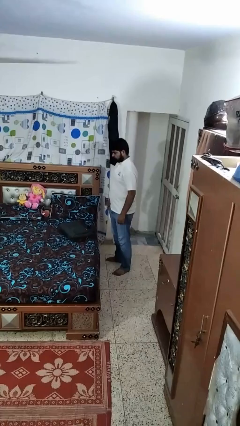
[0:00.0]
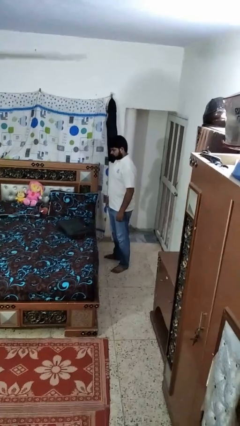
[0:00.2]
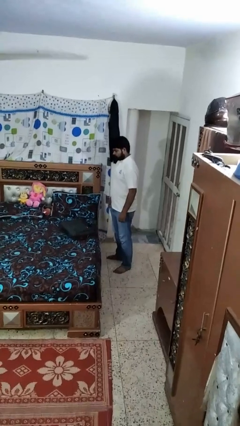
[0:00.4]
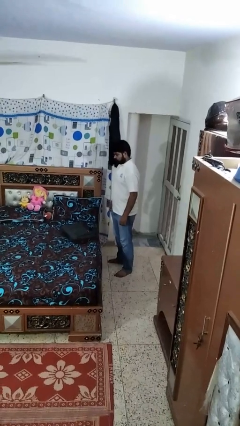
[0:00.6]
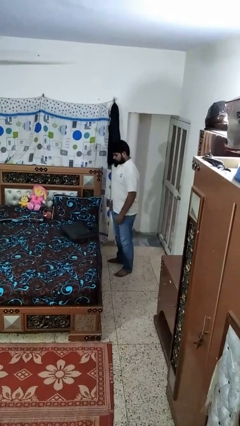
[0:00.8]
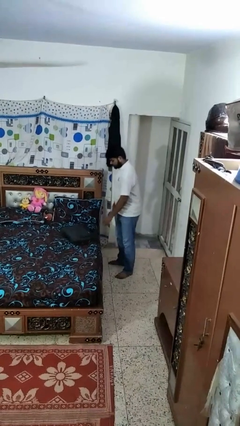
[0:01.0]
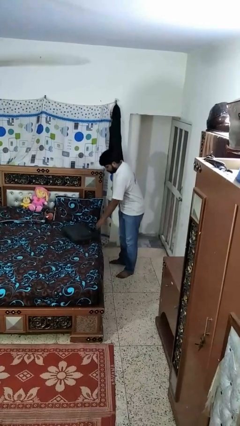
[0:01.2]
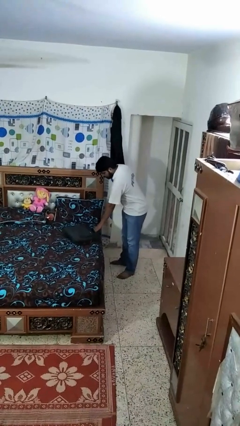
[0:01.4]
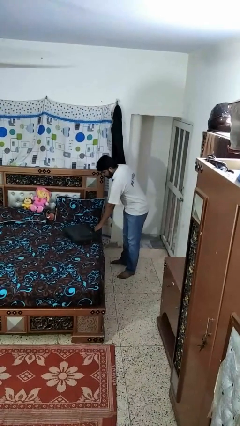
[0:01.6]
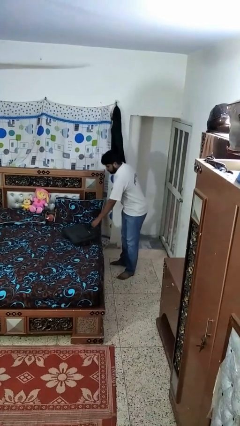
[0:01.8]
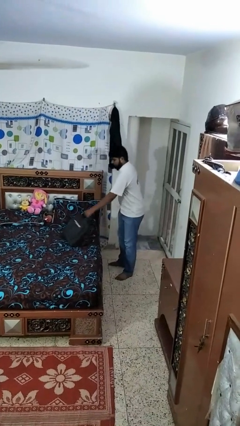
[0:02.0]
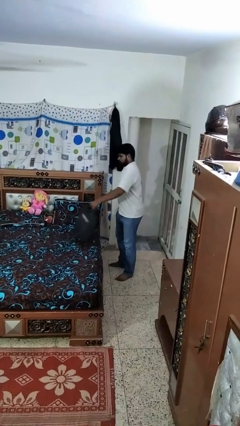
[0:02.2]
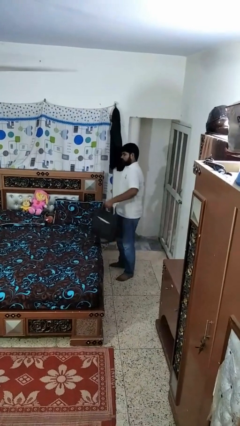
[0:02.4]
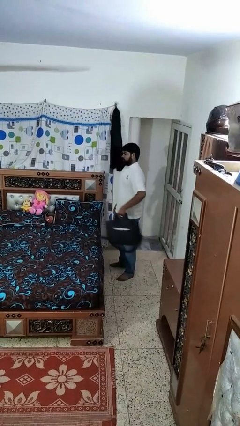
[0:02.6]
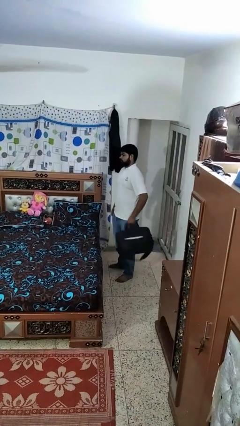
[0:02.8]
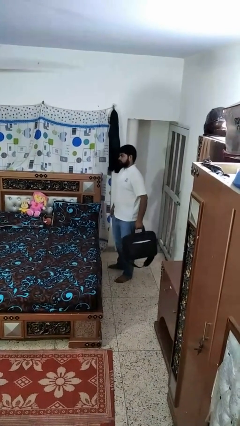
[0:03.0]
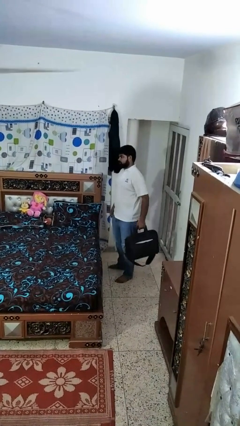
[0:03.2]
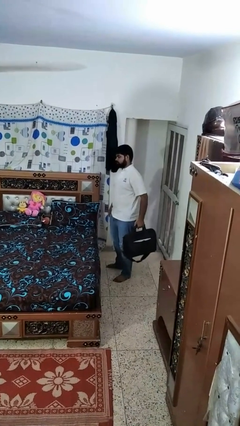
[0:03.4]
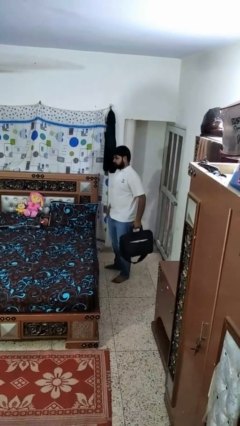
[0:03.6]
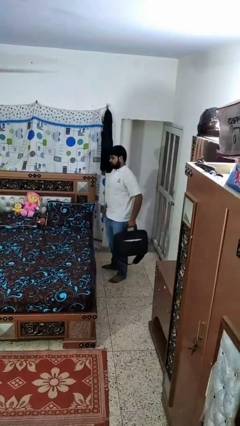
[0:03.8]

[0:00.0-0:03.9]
person picks up object from bed

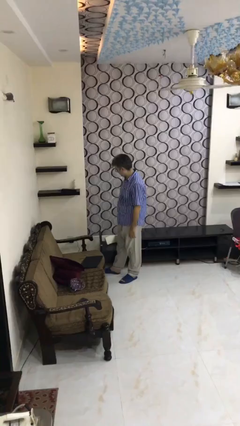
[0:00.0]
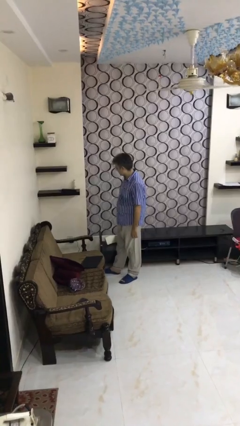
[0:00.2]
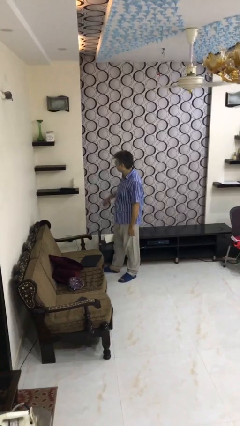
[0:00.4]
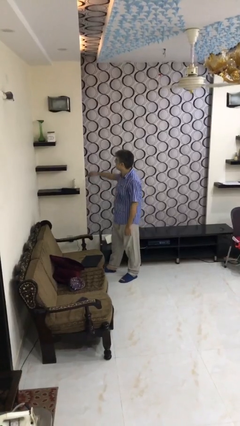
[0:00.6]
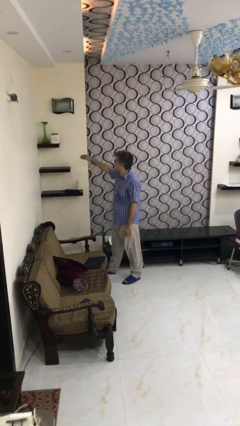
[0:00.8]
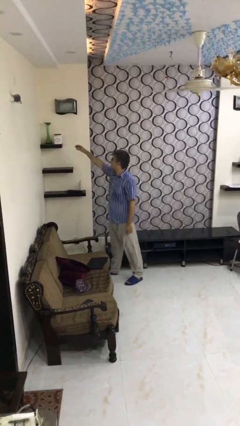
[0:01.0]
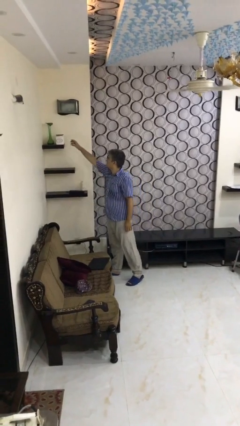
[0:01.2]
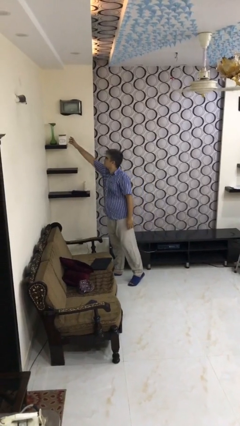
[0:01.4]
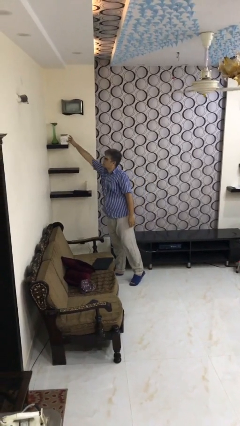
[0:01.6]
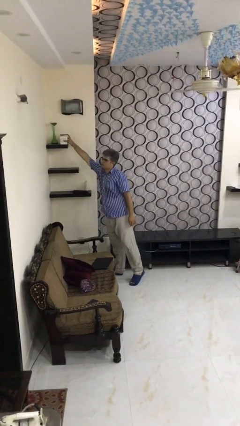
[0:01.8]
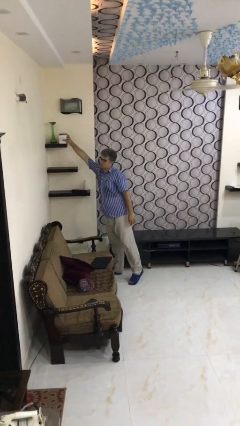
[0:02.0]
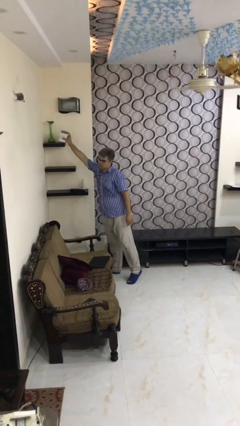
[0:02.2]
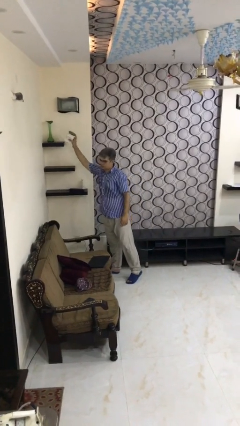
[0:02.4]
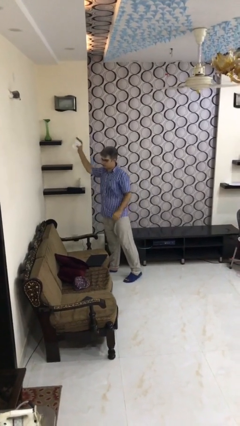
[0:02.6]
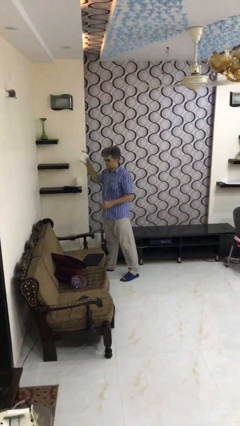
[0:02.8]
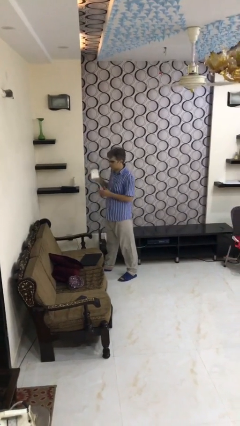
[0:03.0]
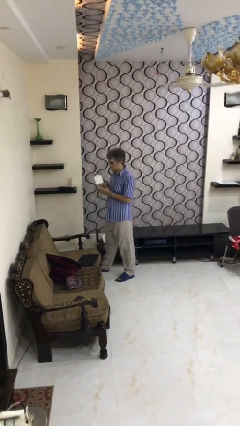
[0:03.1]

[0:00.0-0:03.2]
person picks up object from shelf

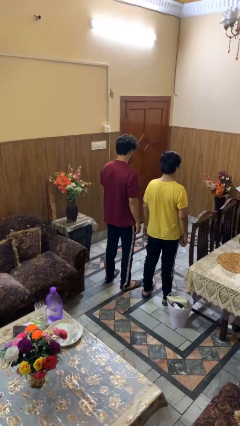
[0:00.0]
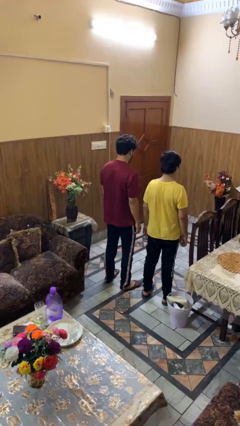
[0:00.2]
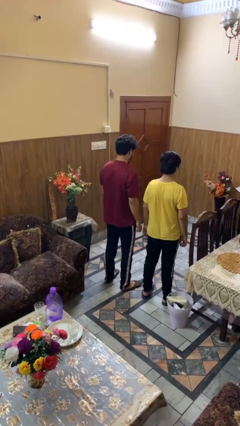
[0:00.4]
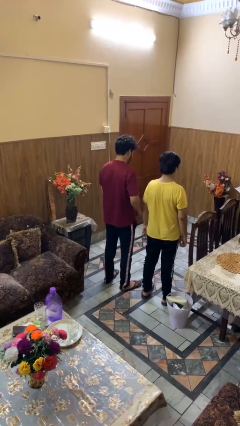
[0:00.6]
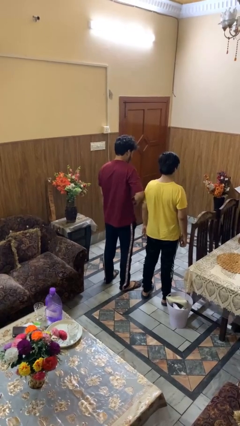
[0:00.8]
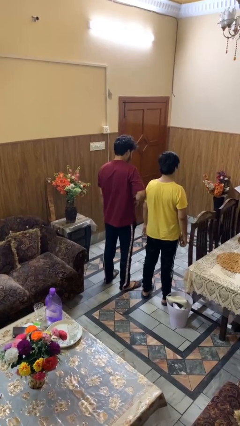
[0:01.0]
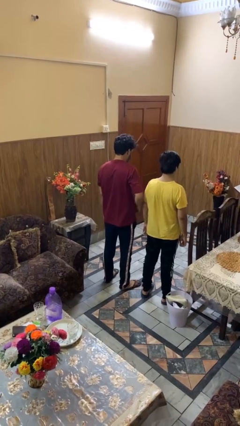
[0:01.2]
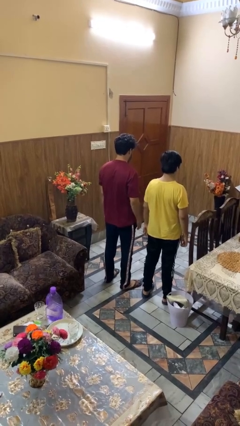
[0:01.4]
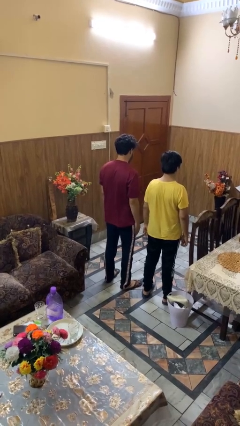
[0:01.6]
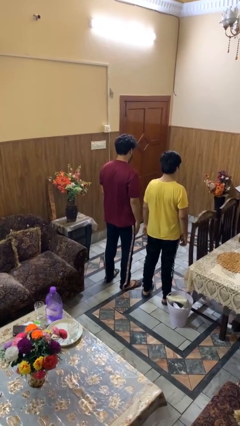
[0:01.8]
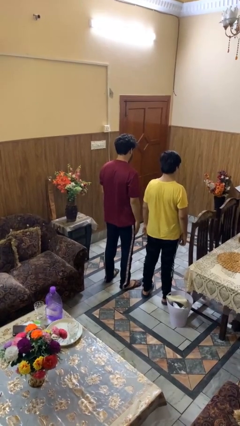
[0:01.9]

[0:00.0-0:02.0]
person nudges person with elbow

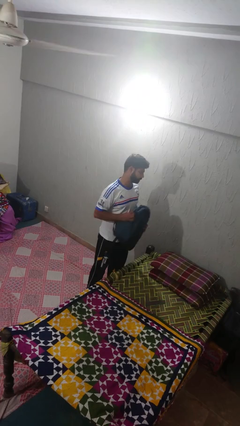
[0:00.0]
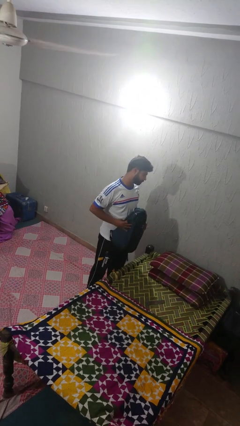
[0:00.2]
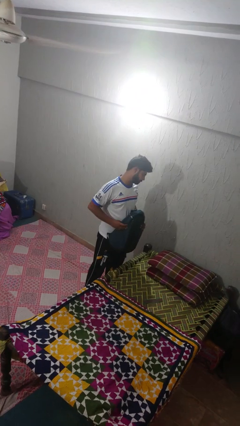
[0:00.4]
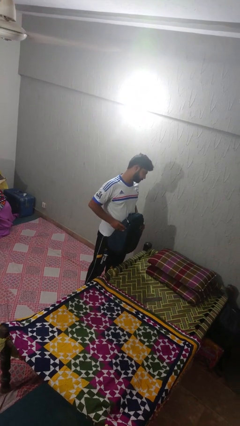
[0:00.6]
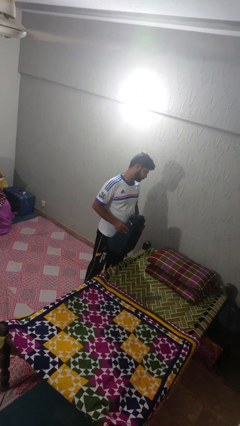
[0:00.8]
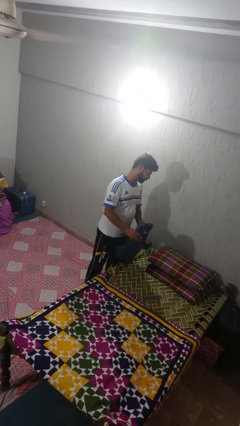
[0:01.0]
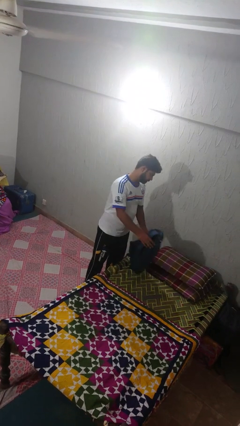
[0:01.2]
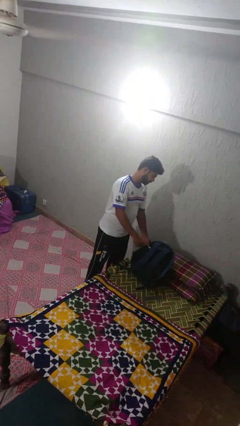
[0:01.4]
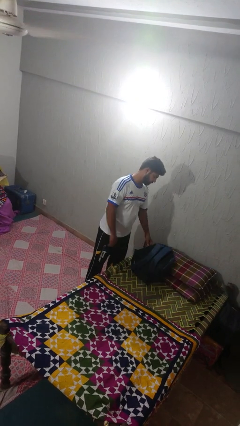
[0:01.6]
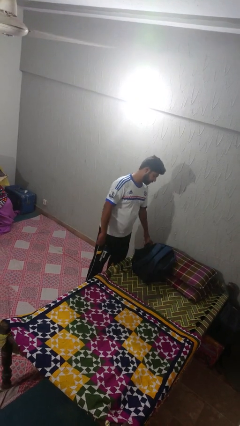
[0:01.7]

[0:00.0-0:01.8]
person puts down object on bed

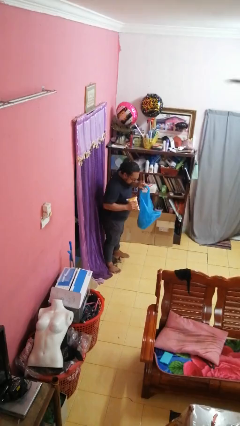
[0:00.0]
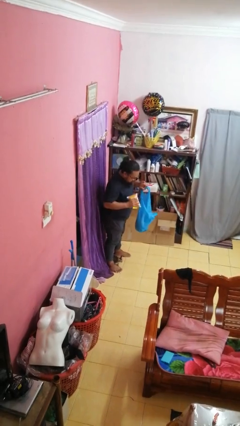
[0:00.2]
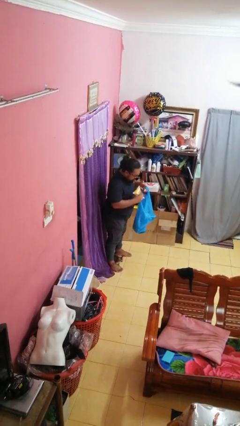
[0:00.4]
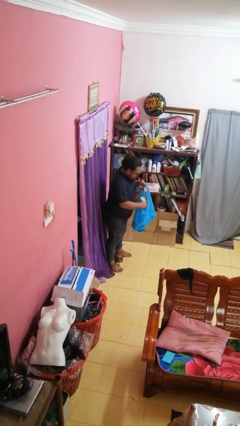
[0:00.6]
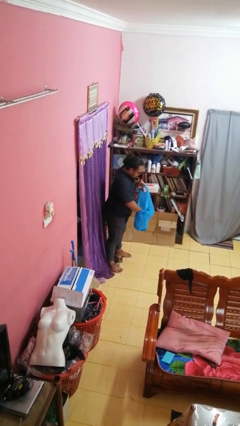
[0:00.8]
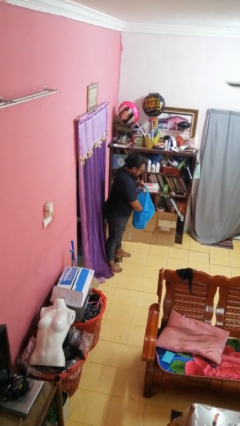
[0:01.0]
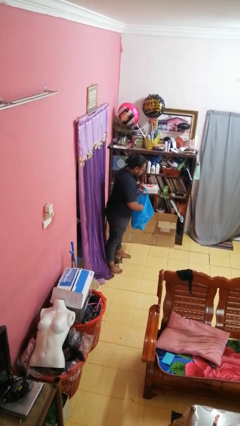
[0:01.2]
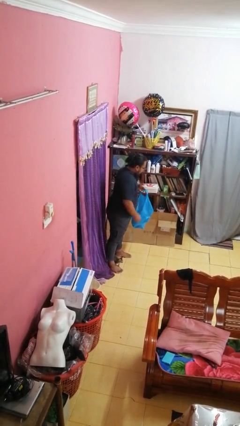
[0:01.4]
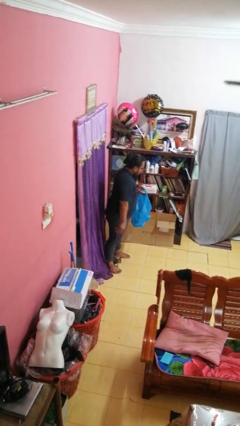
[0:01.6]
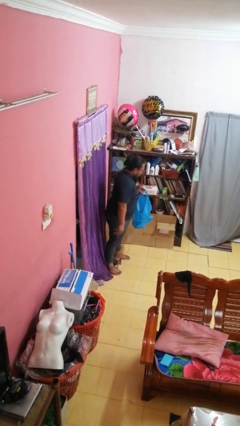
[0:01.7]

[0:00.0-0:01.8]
person puts object into bag

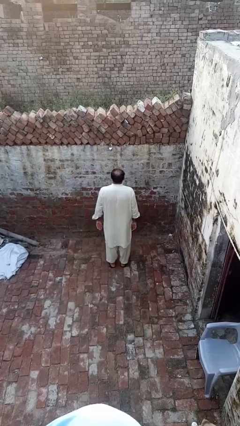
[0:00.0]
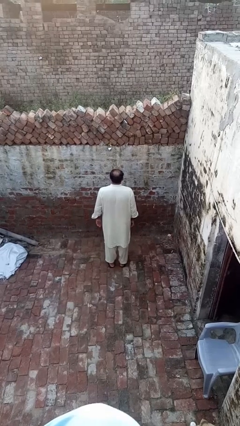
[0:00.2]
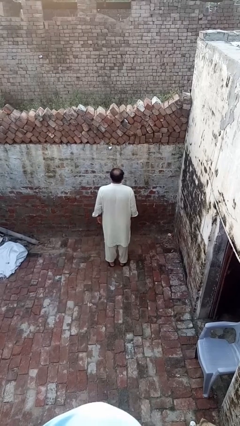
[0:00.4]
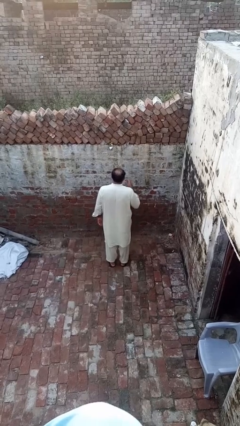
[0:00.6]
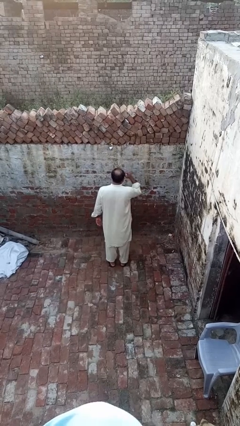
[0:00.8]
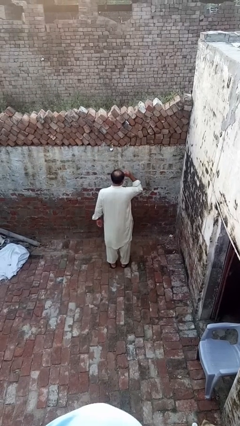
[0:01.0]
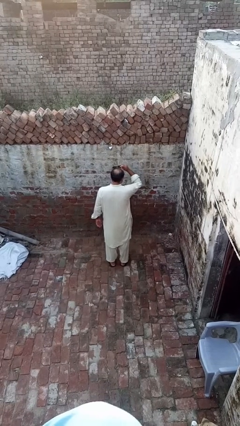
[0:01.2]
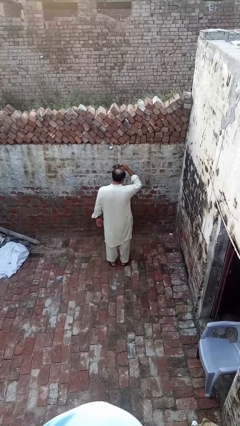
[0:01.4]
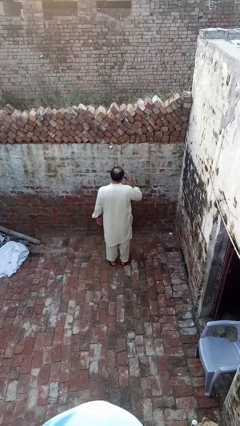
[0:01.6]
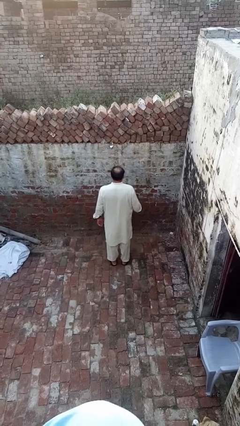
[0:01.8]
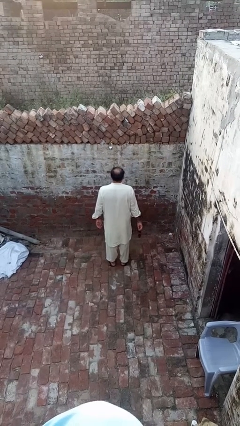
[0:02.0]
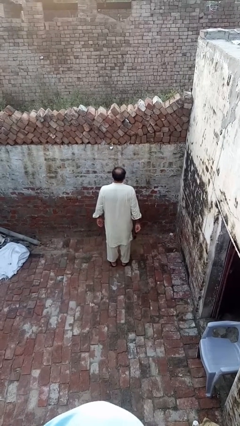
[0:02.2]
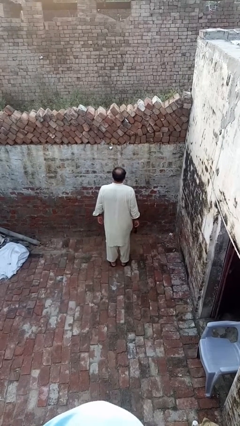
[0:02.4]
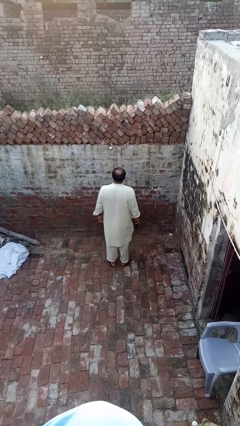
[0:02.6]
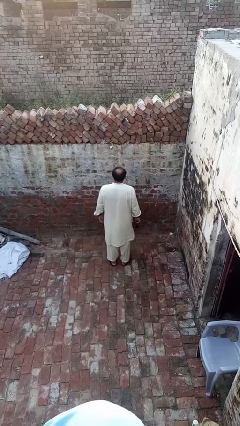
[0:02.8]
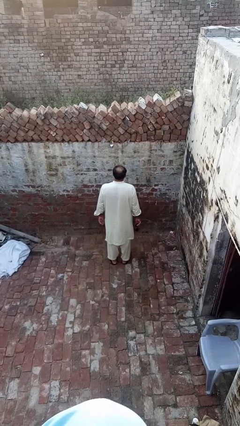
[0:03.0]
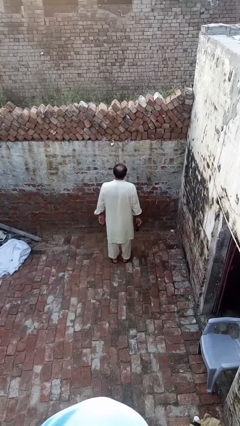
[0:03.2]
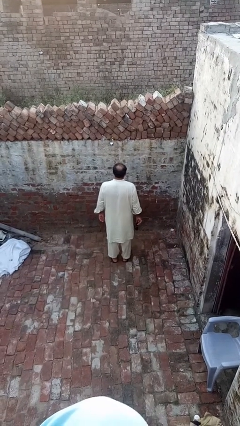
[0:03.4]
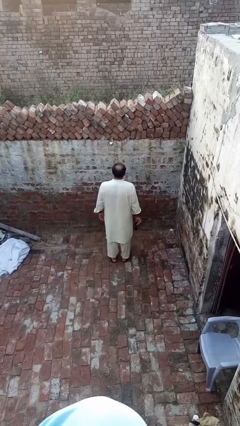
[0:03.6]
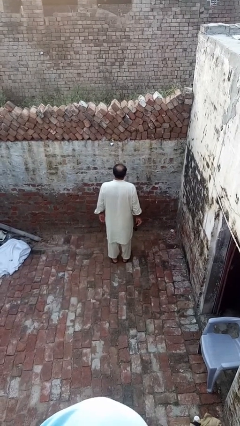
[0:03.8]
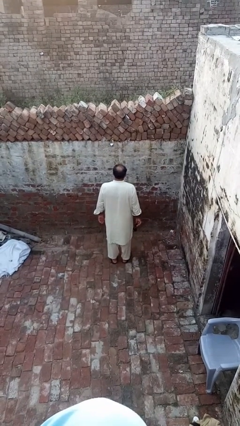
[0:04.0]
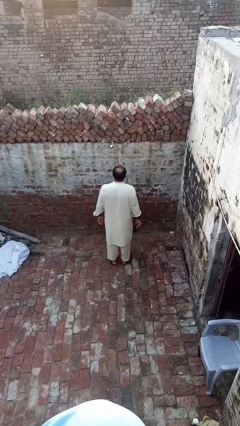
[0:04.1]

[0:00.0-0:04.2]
person takes off sunglasses

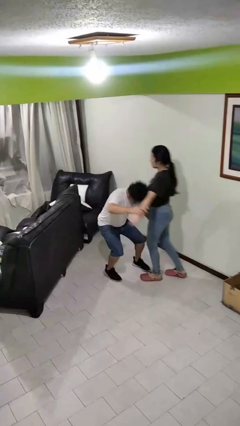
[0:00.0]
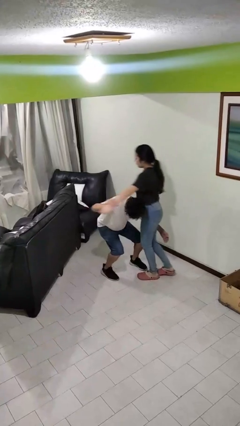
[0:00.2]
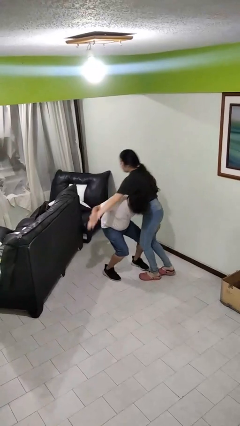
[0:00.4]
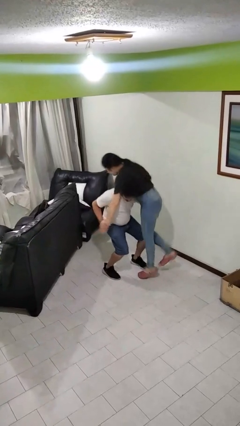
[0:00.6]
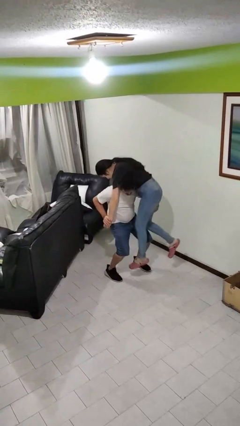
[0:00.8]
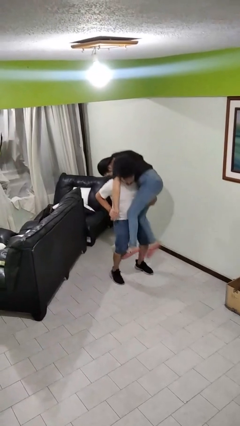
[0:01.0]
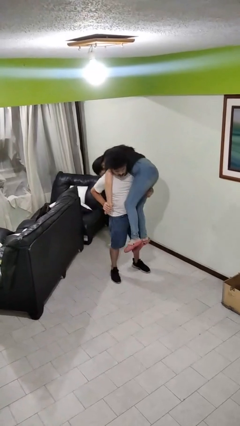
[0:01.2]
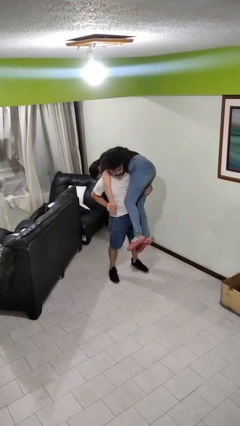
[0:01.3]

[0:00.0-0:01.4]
person carries person over shoulder
